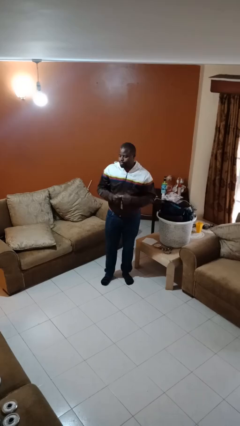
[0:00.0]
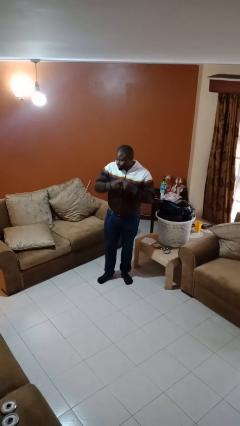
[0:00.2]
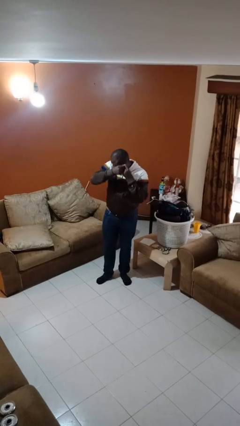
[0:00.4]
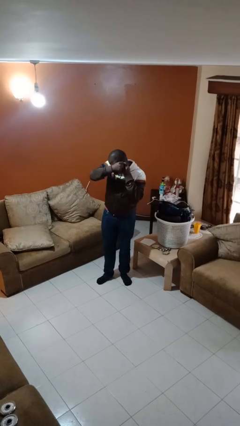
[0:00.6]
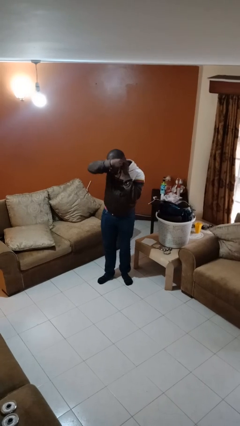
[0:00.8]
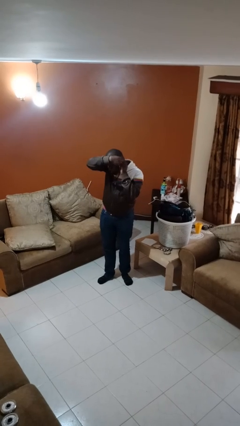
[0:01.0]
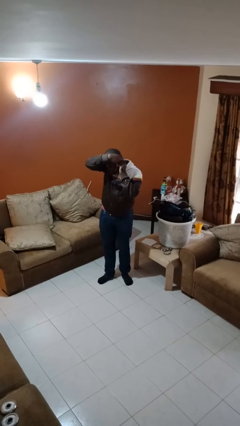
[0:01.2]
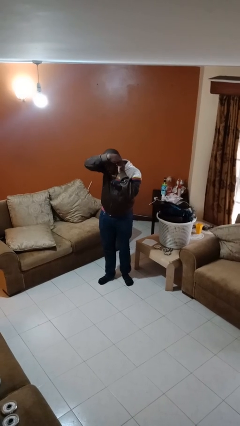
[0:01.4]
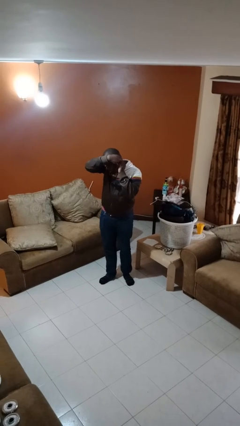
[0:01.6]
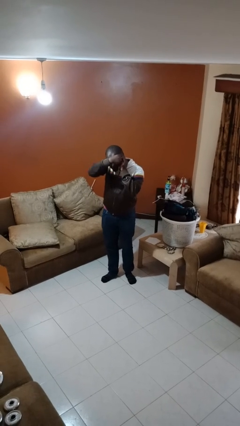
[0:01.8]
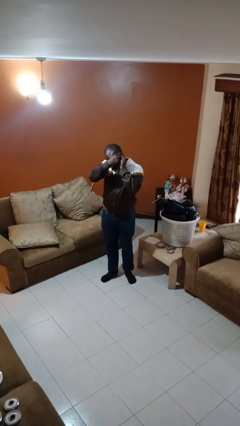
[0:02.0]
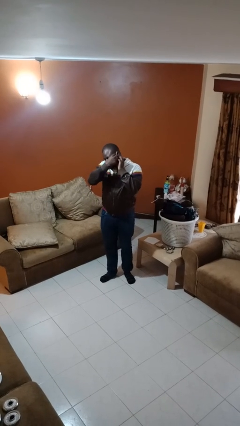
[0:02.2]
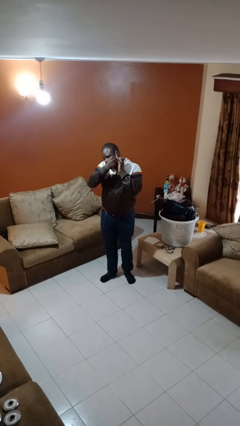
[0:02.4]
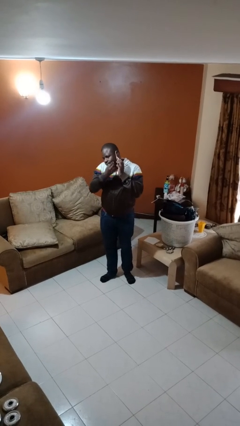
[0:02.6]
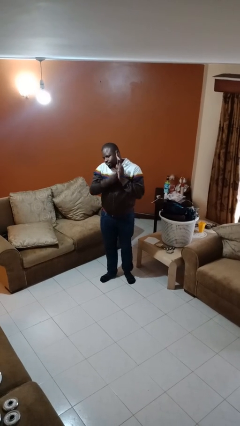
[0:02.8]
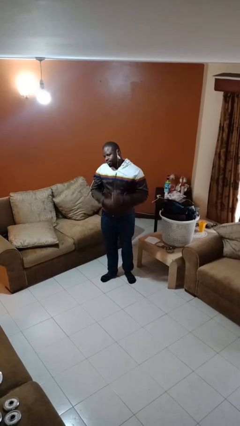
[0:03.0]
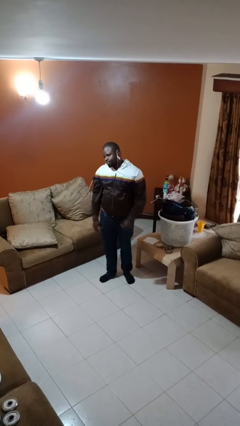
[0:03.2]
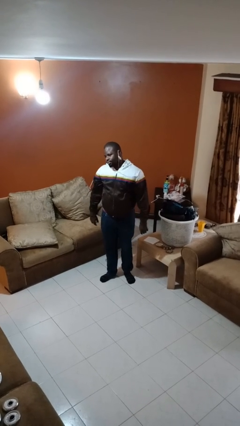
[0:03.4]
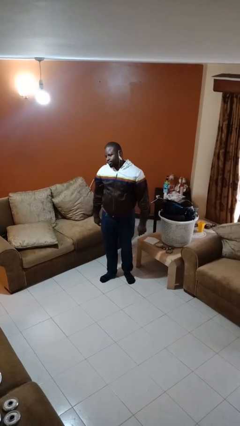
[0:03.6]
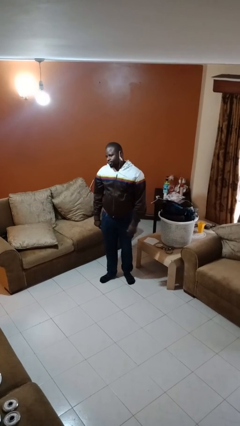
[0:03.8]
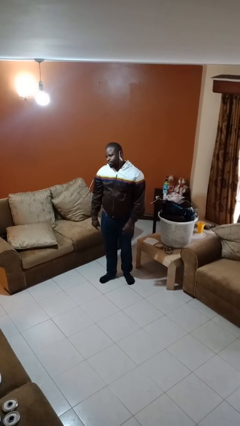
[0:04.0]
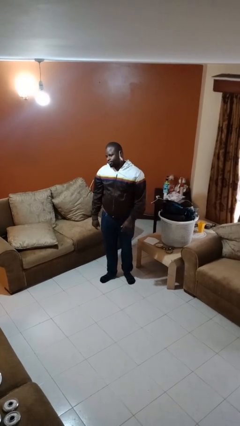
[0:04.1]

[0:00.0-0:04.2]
person puts on earrings

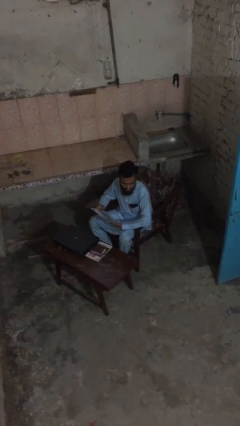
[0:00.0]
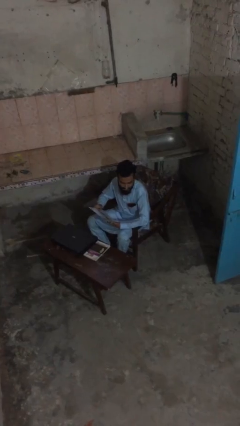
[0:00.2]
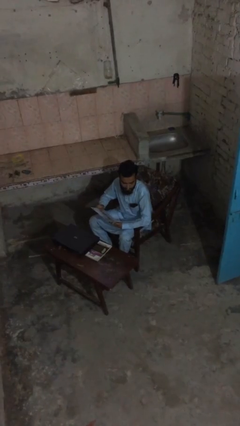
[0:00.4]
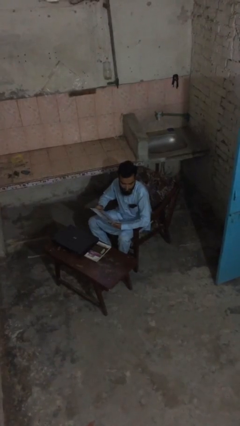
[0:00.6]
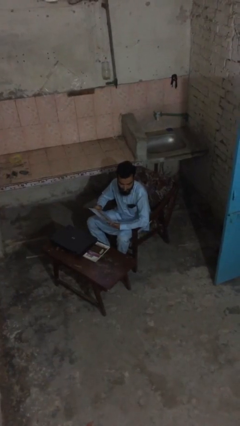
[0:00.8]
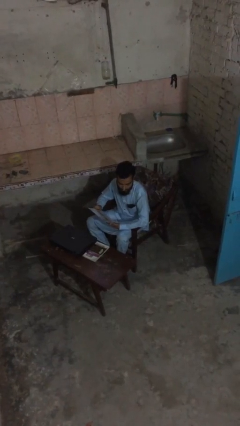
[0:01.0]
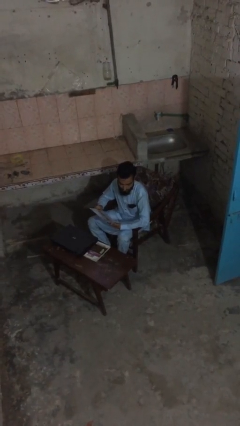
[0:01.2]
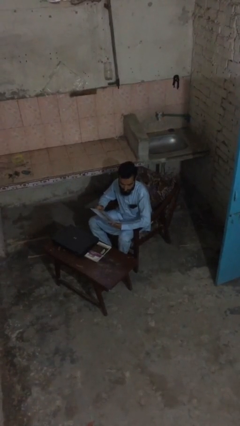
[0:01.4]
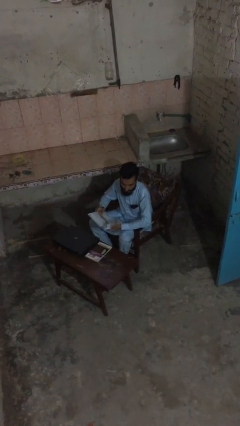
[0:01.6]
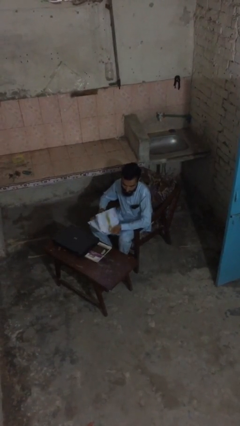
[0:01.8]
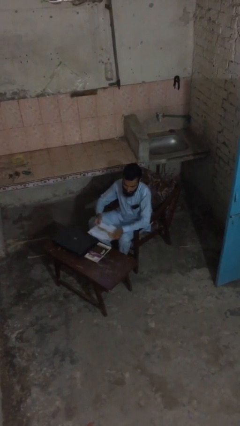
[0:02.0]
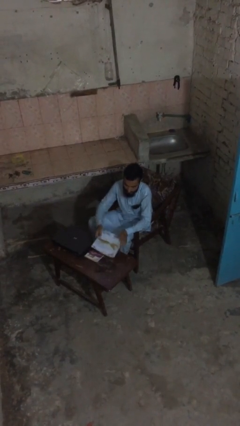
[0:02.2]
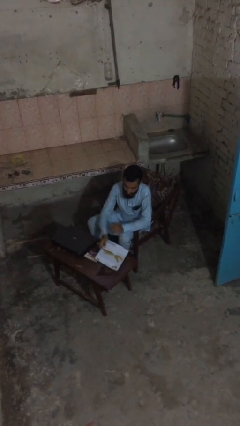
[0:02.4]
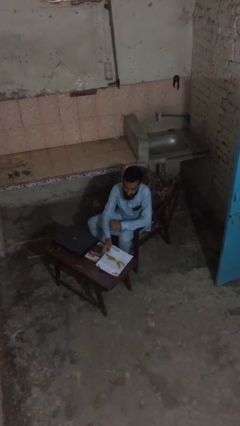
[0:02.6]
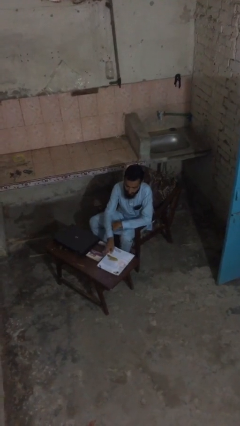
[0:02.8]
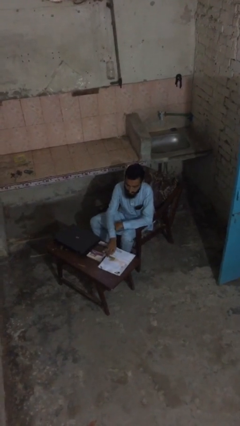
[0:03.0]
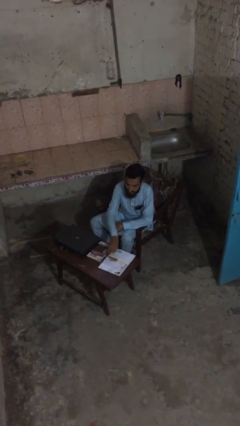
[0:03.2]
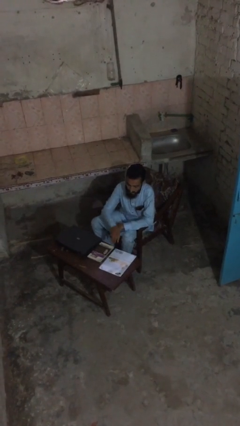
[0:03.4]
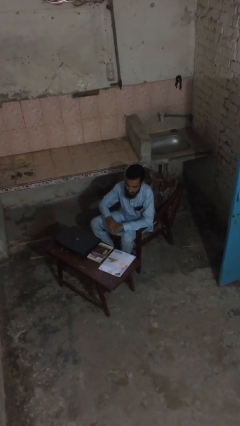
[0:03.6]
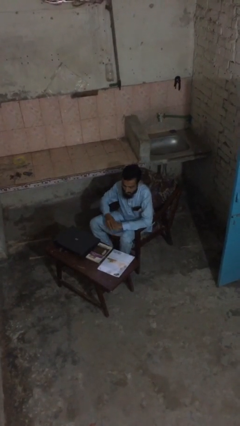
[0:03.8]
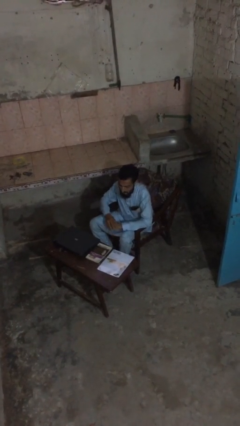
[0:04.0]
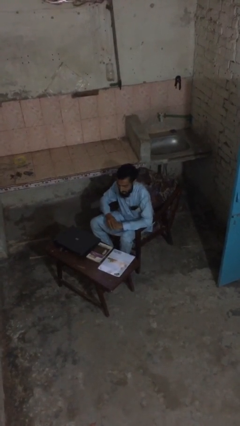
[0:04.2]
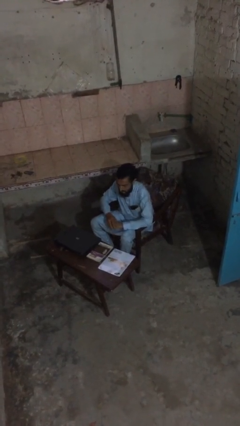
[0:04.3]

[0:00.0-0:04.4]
person puts down object on table

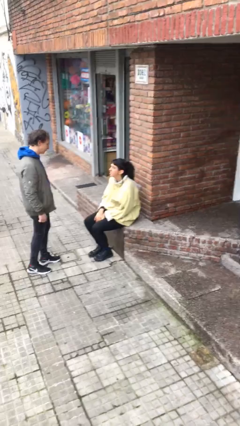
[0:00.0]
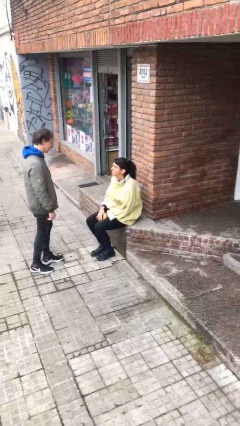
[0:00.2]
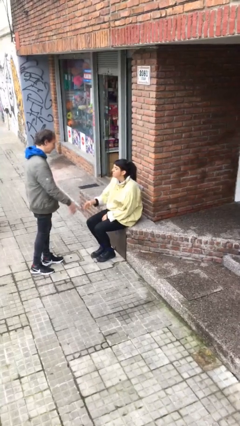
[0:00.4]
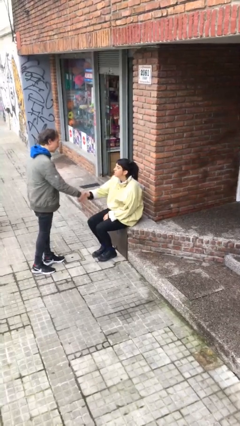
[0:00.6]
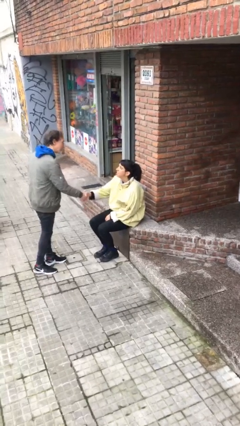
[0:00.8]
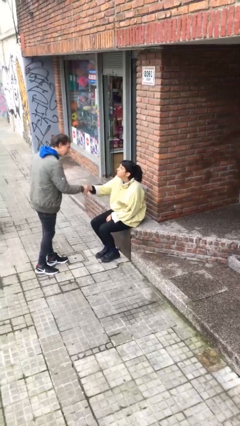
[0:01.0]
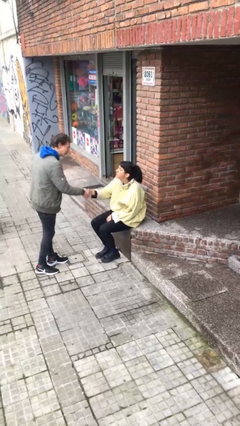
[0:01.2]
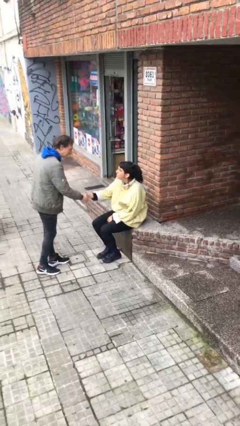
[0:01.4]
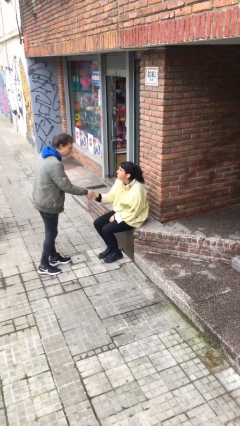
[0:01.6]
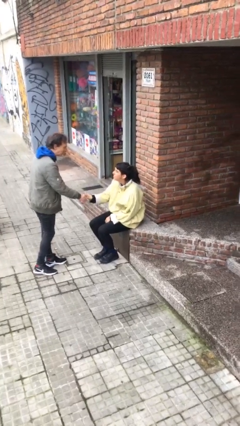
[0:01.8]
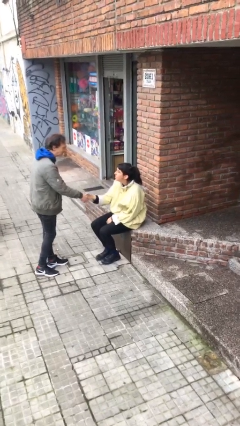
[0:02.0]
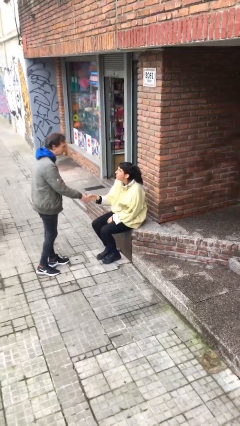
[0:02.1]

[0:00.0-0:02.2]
person shakes hand

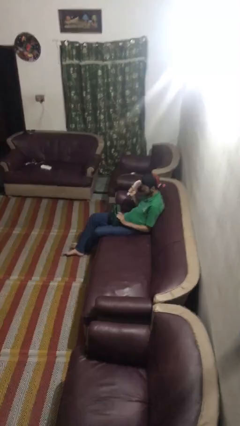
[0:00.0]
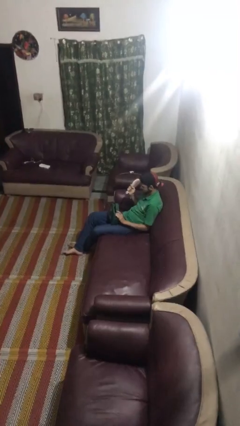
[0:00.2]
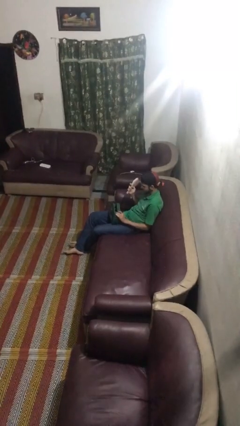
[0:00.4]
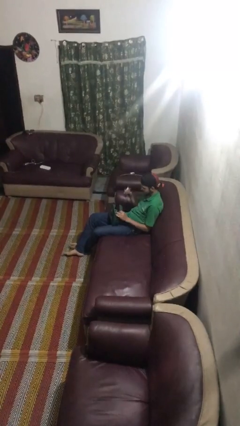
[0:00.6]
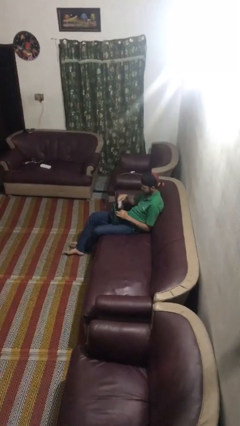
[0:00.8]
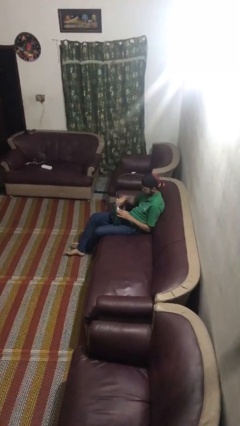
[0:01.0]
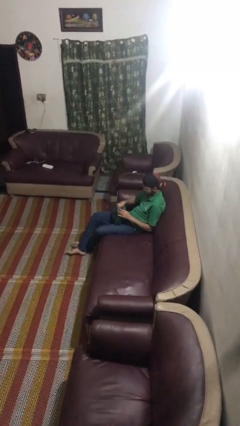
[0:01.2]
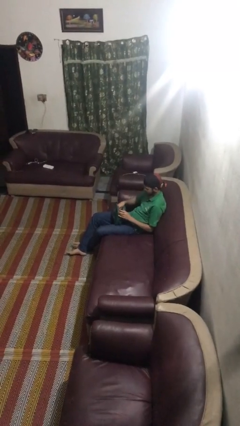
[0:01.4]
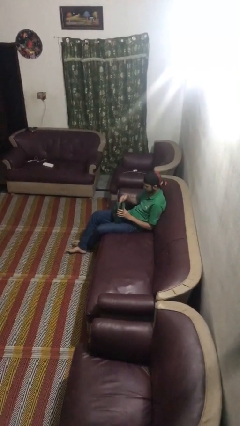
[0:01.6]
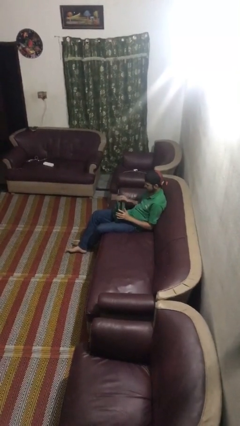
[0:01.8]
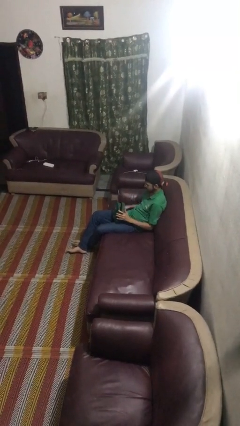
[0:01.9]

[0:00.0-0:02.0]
person puts object into purse

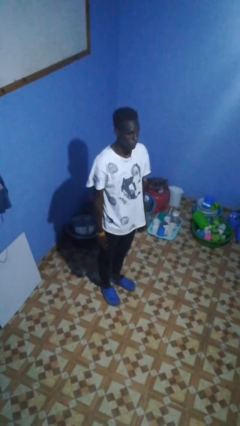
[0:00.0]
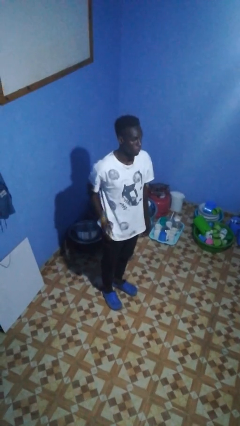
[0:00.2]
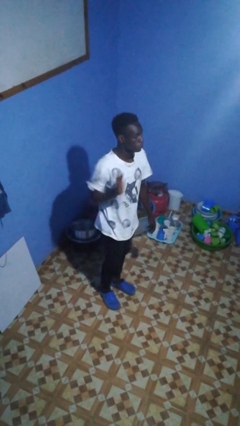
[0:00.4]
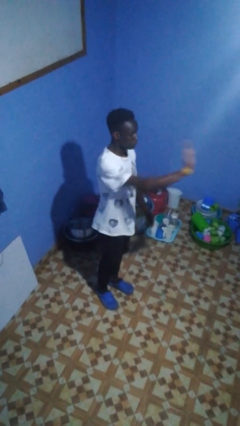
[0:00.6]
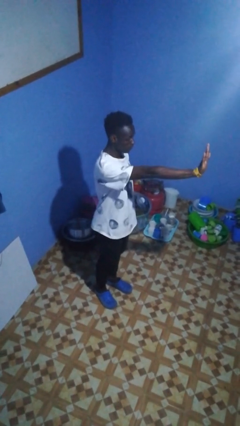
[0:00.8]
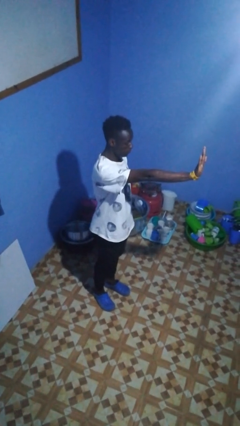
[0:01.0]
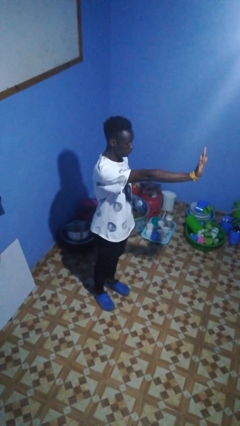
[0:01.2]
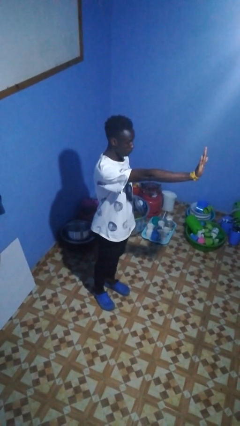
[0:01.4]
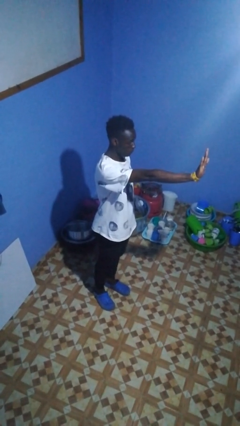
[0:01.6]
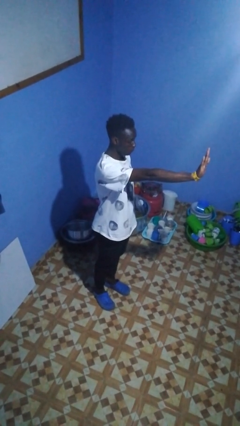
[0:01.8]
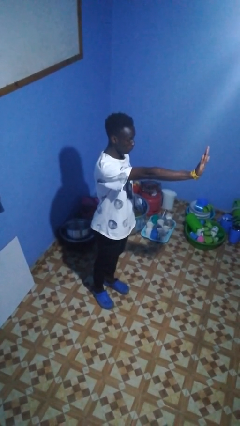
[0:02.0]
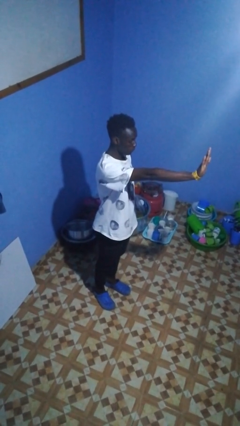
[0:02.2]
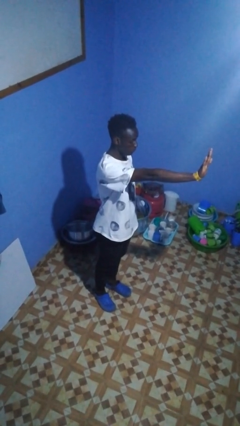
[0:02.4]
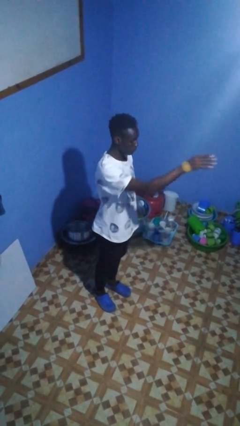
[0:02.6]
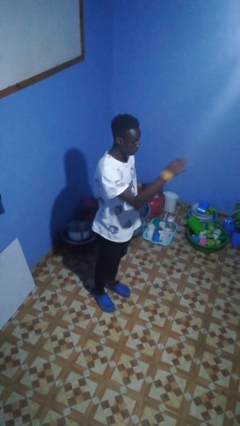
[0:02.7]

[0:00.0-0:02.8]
person gestures stop

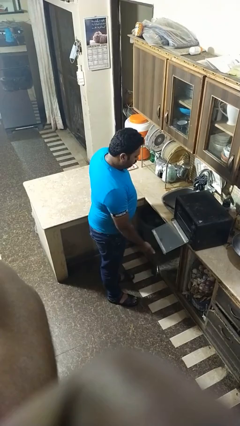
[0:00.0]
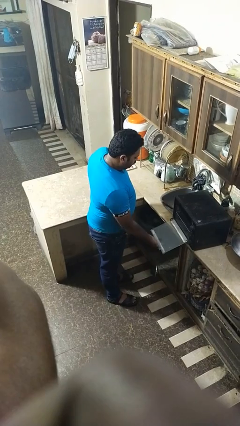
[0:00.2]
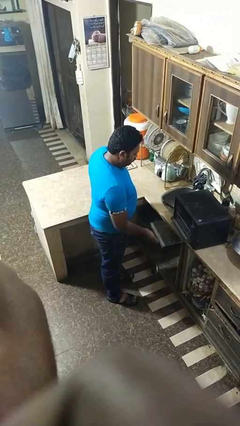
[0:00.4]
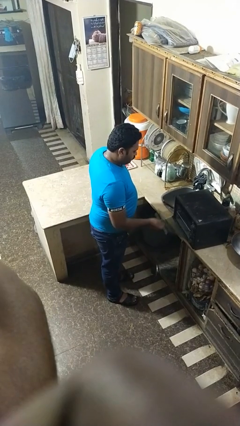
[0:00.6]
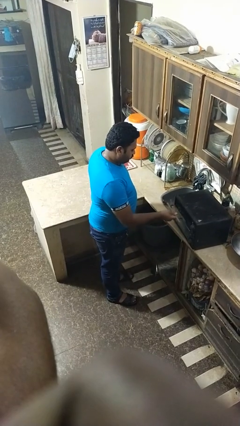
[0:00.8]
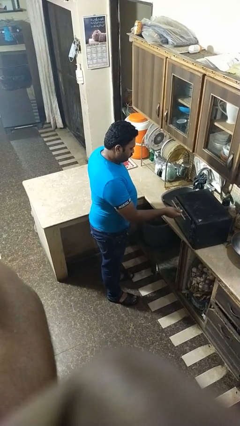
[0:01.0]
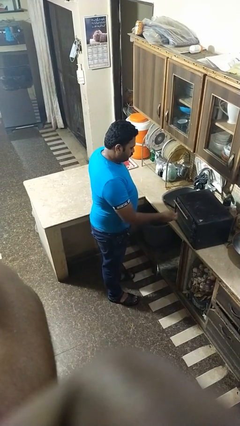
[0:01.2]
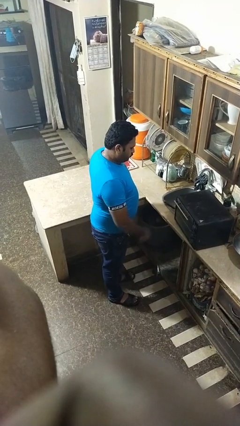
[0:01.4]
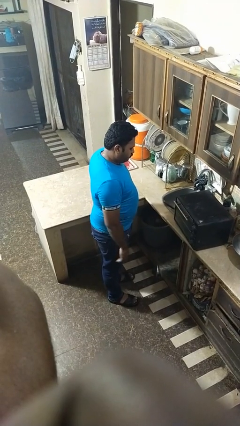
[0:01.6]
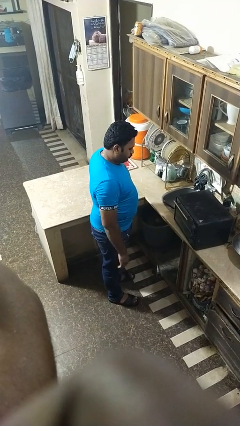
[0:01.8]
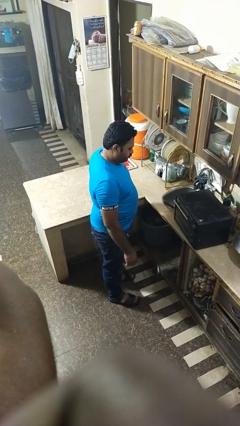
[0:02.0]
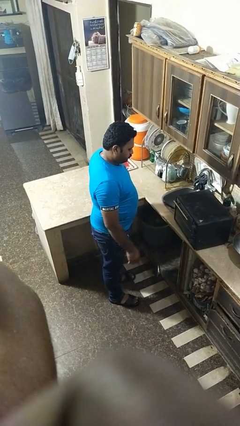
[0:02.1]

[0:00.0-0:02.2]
person closes oven door
